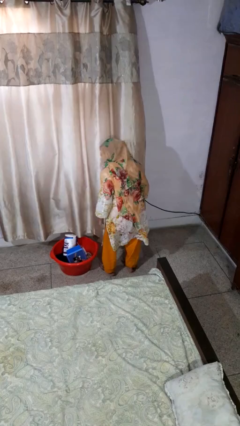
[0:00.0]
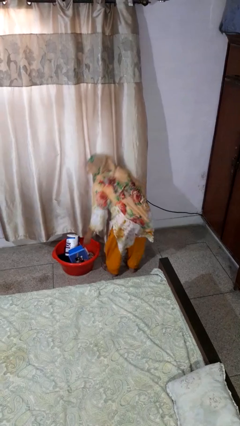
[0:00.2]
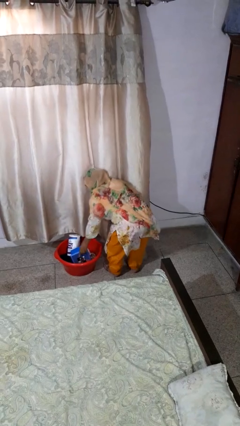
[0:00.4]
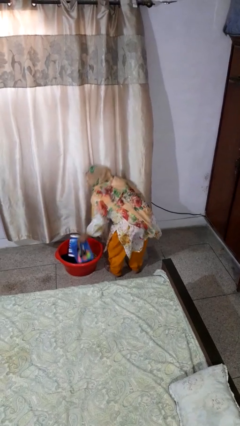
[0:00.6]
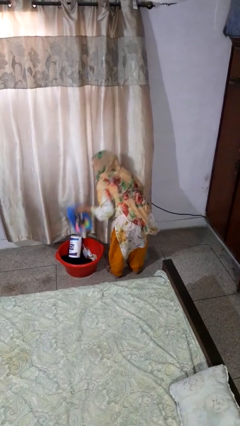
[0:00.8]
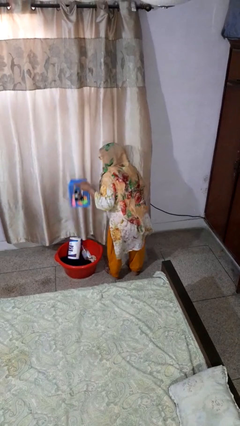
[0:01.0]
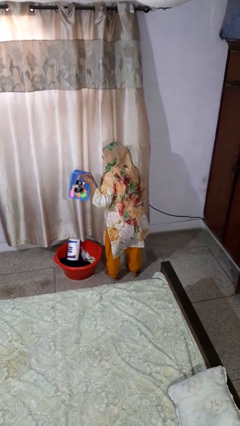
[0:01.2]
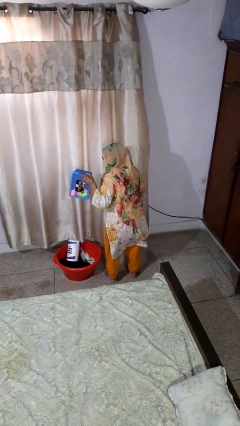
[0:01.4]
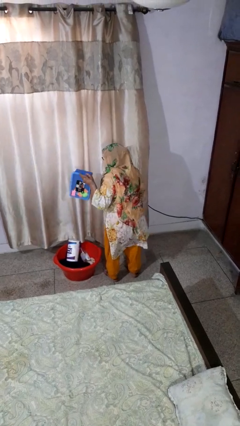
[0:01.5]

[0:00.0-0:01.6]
person takes object from basket

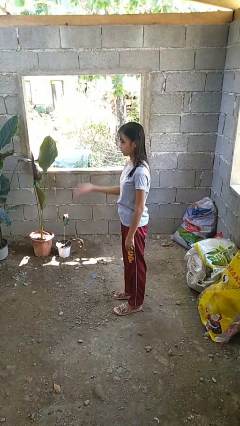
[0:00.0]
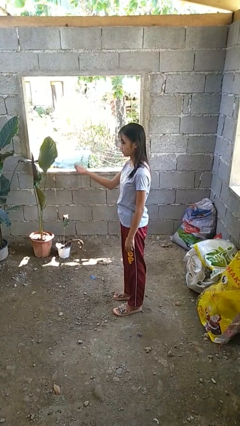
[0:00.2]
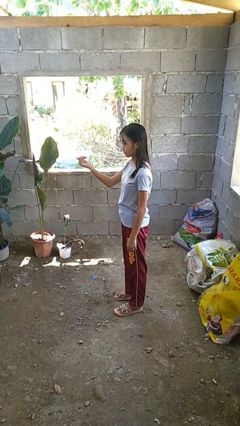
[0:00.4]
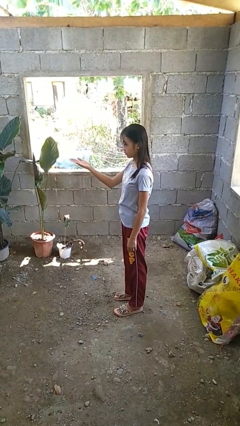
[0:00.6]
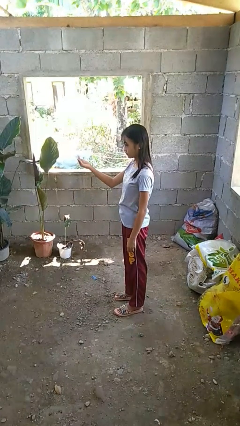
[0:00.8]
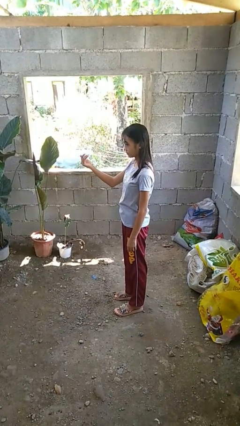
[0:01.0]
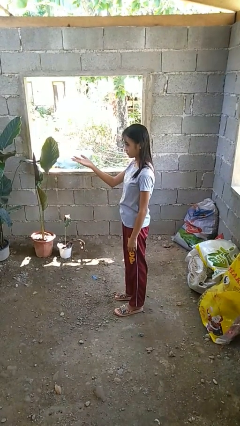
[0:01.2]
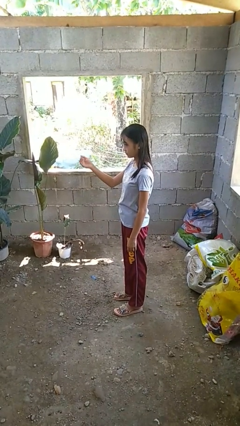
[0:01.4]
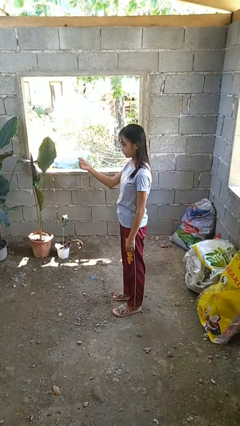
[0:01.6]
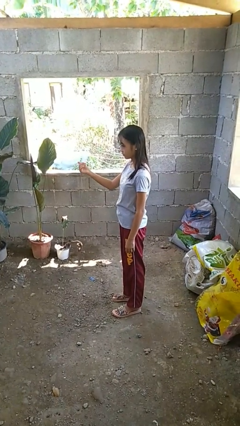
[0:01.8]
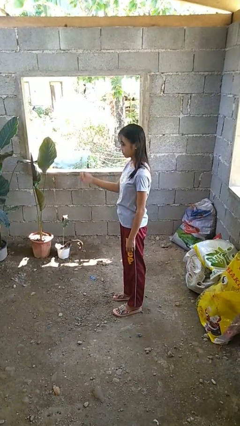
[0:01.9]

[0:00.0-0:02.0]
person gestures come here

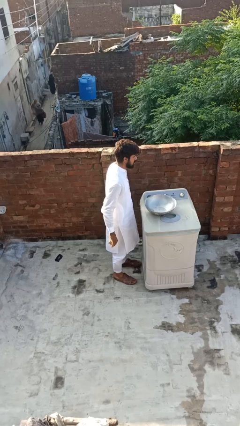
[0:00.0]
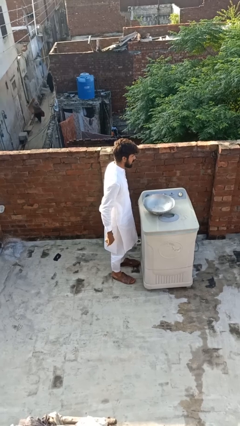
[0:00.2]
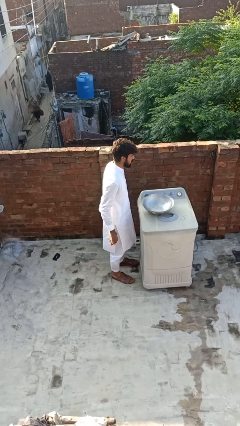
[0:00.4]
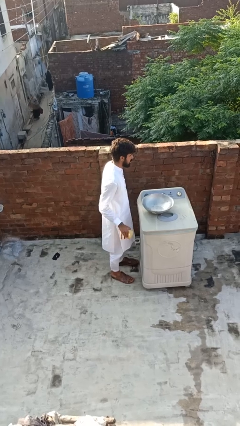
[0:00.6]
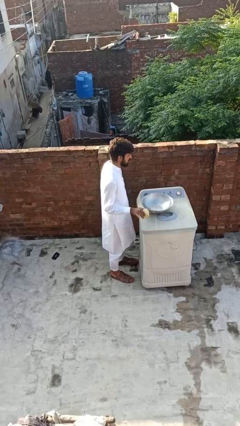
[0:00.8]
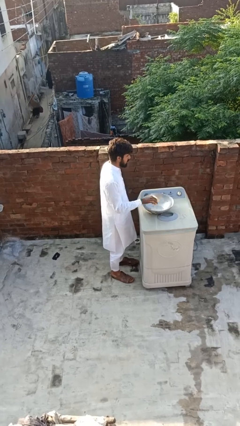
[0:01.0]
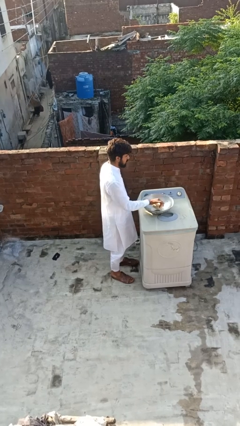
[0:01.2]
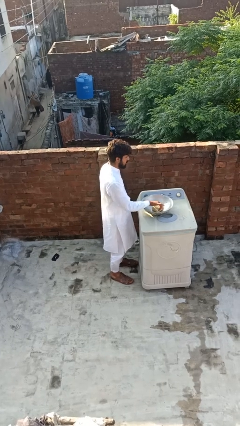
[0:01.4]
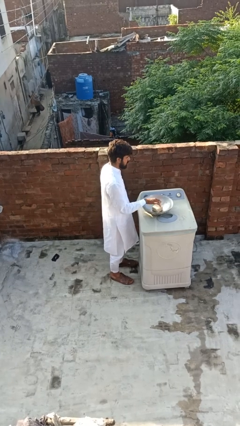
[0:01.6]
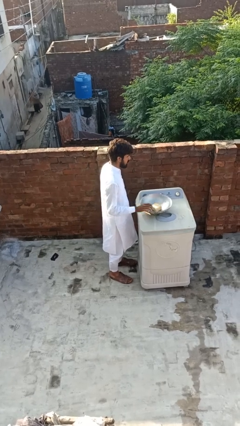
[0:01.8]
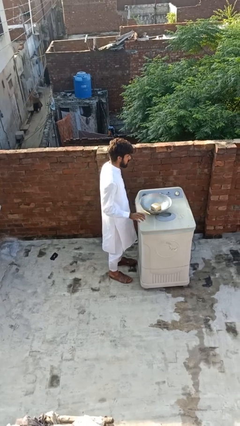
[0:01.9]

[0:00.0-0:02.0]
person pours into bowl

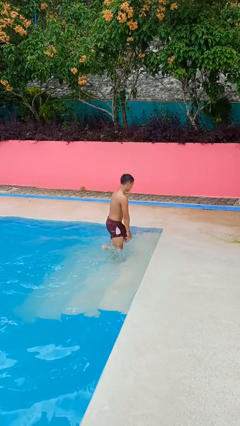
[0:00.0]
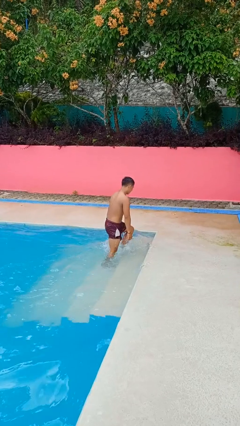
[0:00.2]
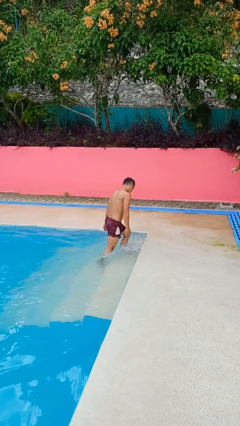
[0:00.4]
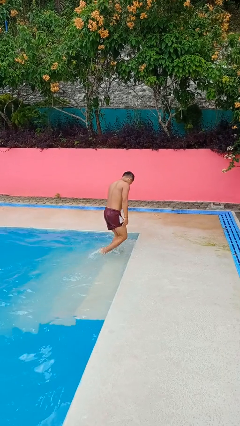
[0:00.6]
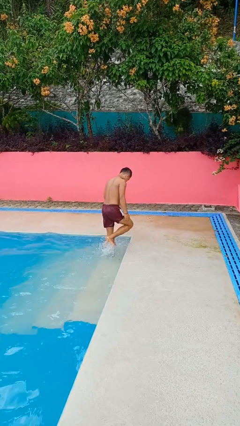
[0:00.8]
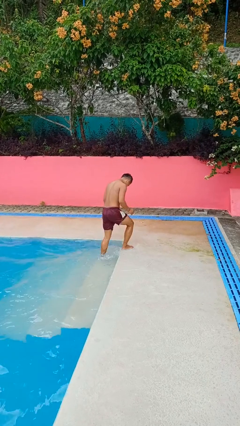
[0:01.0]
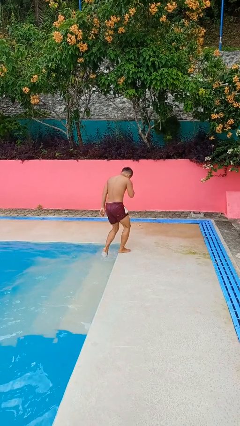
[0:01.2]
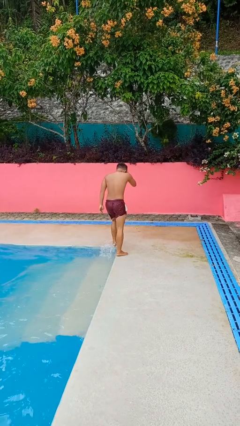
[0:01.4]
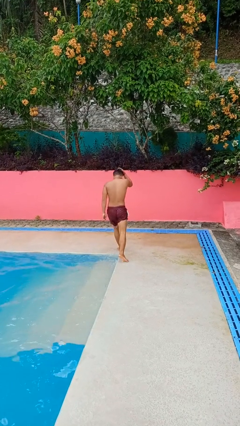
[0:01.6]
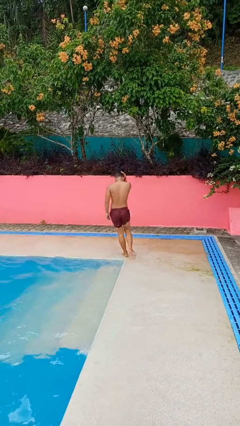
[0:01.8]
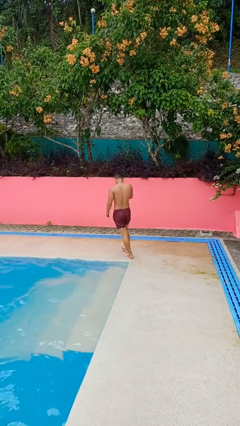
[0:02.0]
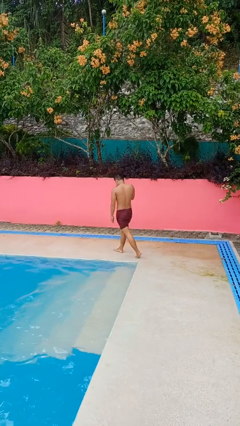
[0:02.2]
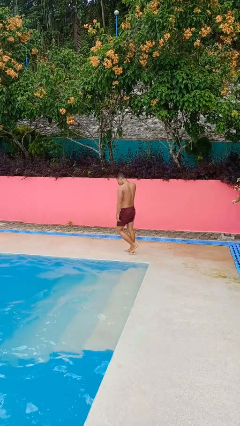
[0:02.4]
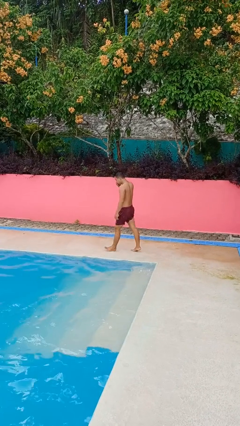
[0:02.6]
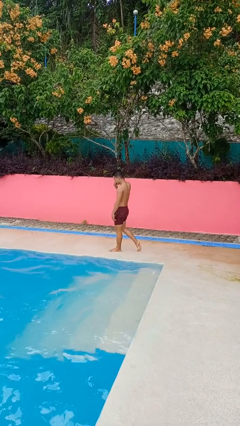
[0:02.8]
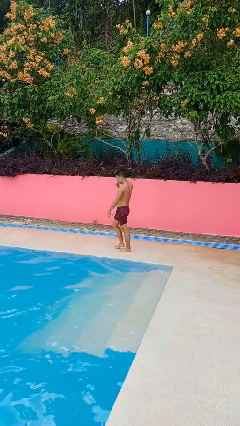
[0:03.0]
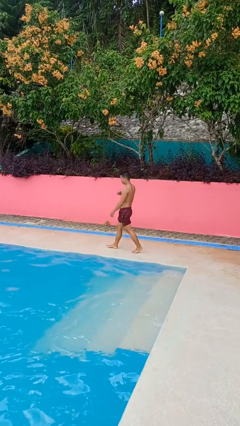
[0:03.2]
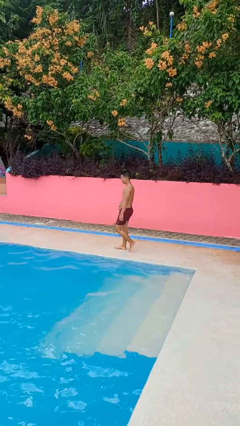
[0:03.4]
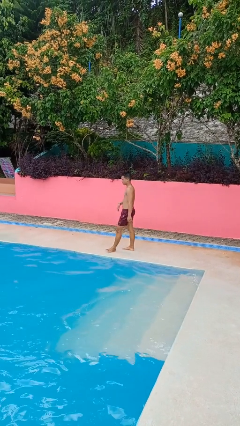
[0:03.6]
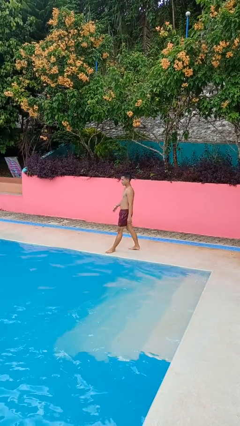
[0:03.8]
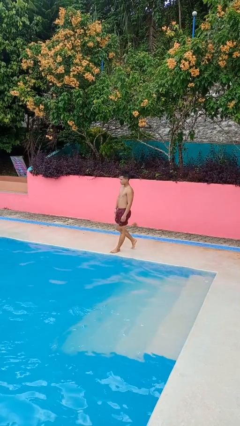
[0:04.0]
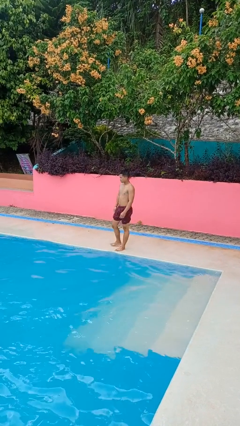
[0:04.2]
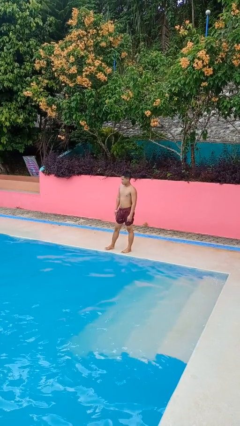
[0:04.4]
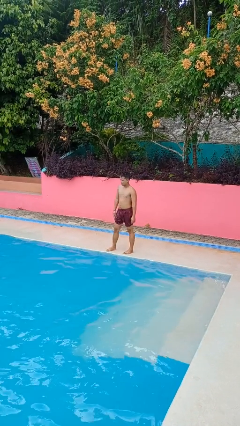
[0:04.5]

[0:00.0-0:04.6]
person exits pool

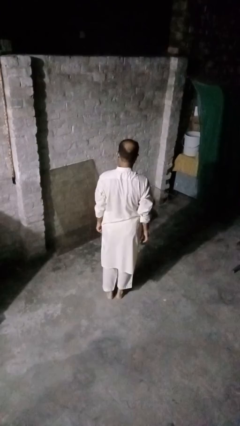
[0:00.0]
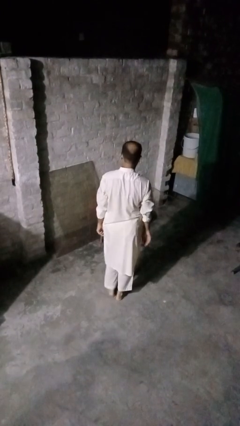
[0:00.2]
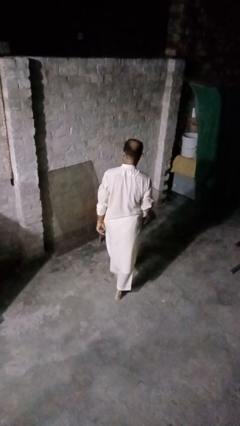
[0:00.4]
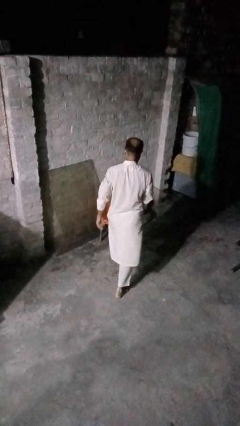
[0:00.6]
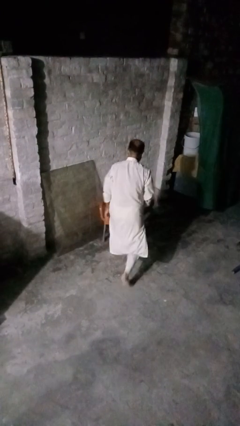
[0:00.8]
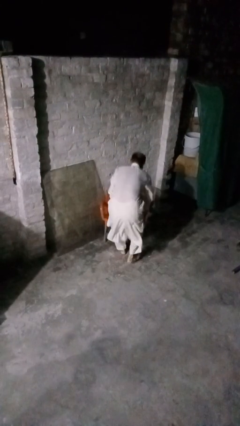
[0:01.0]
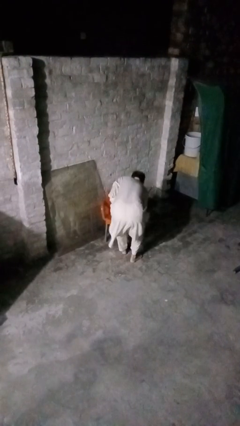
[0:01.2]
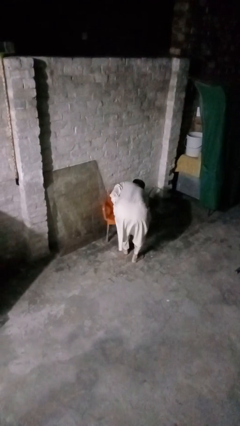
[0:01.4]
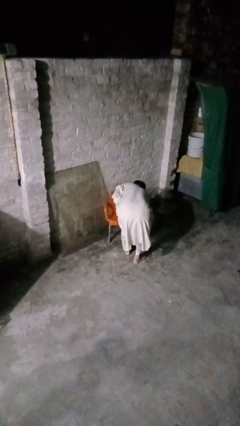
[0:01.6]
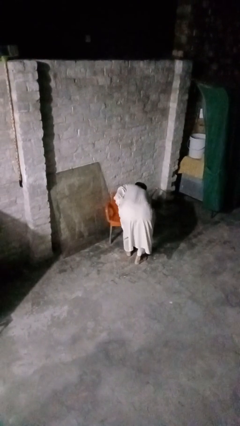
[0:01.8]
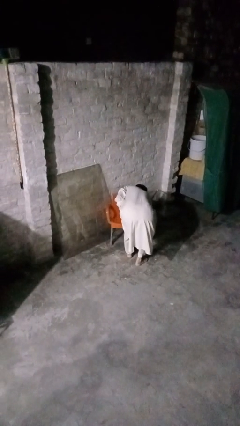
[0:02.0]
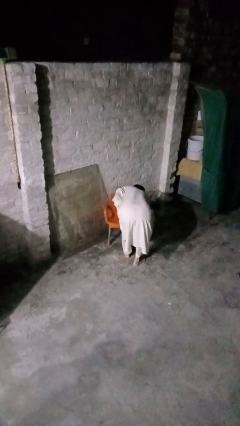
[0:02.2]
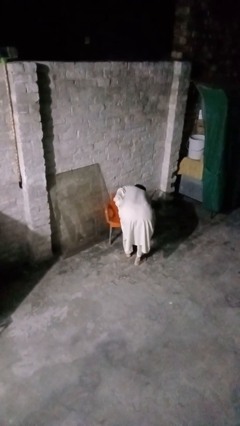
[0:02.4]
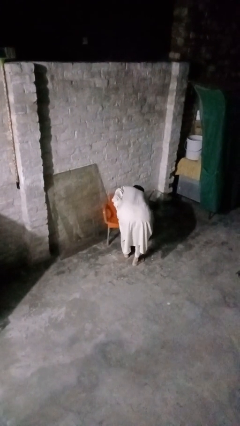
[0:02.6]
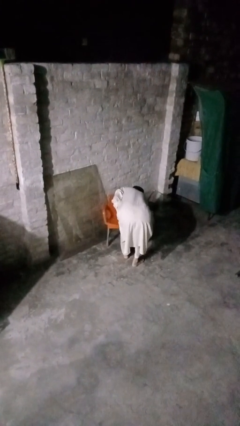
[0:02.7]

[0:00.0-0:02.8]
person stubs toe

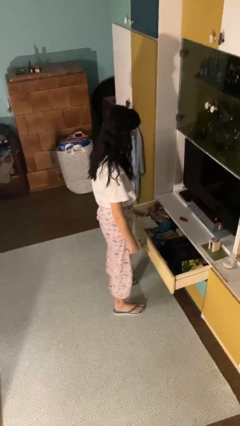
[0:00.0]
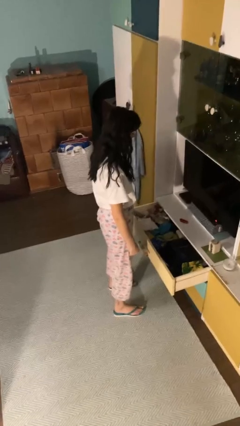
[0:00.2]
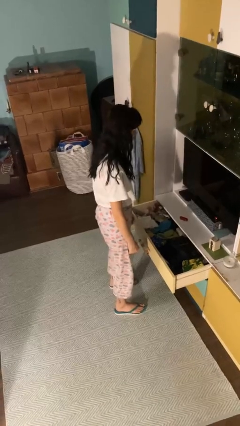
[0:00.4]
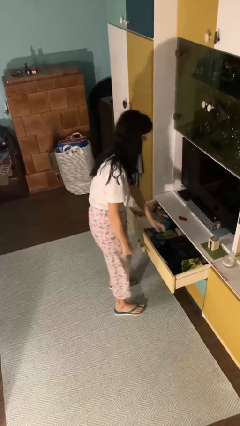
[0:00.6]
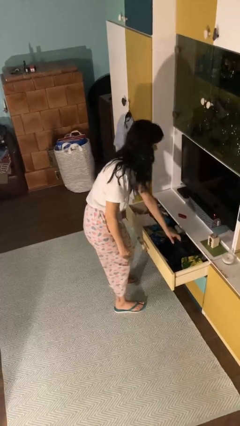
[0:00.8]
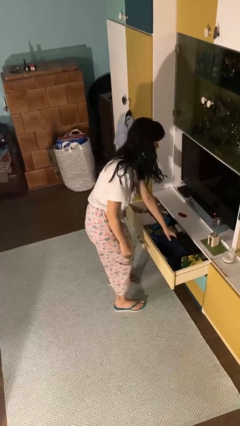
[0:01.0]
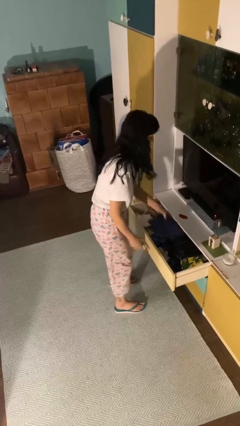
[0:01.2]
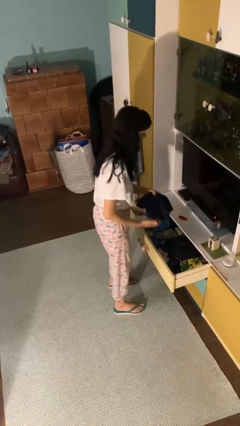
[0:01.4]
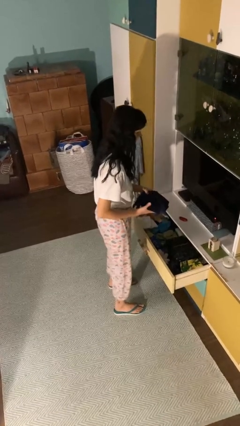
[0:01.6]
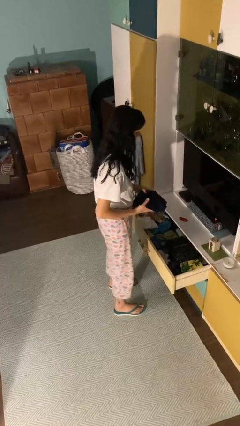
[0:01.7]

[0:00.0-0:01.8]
person takes clothes from dresser

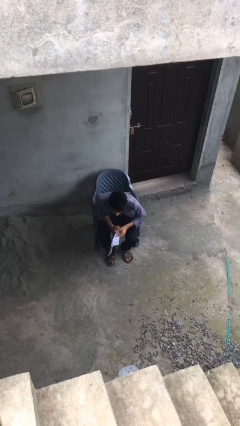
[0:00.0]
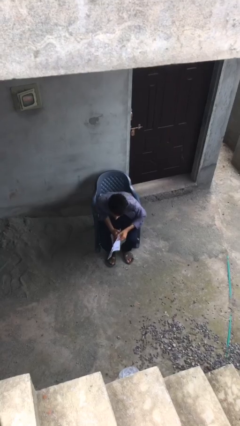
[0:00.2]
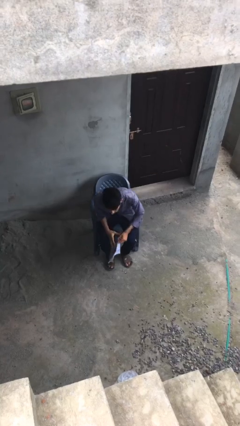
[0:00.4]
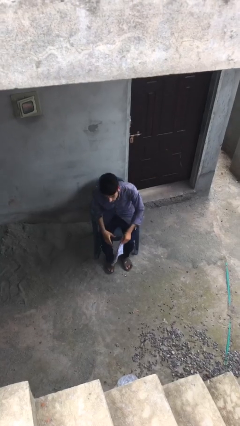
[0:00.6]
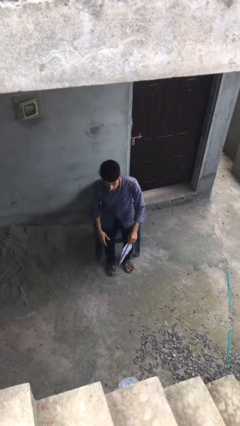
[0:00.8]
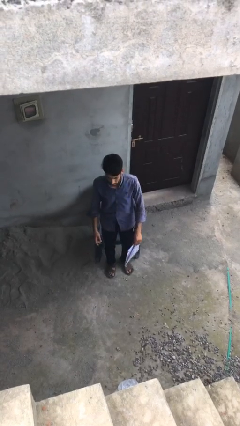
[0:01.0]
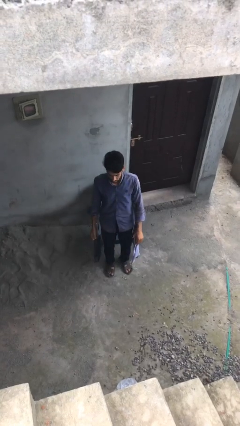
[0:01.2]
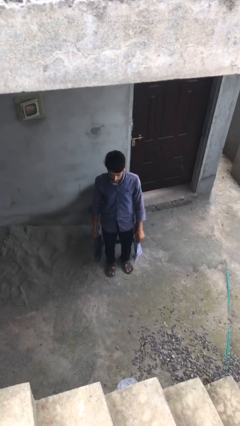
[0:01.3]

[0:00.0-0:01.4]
person stands up

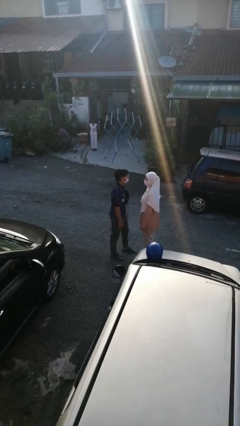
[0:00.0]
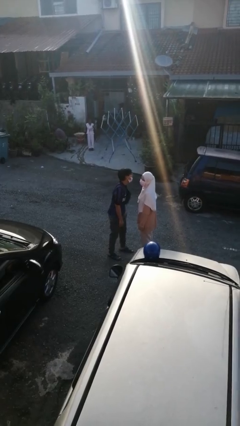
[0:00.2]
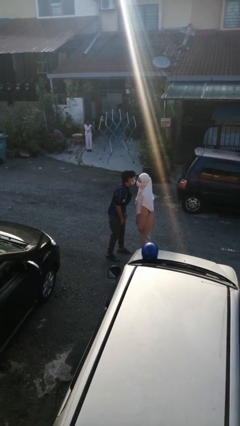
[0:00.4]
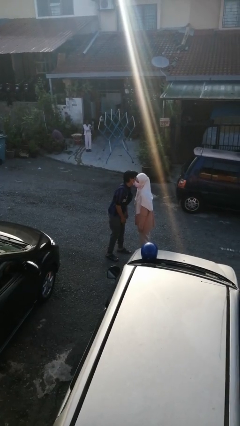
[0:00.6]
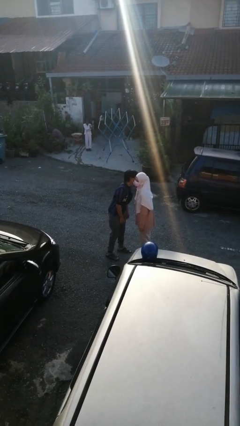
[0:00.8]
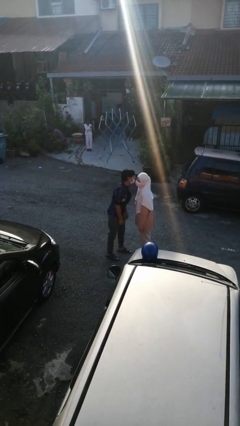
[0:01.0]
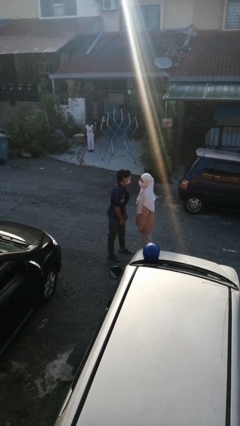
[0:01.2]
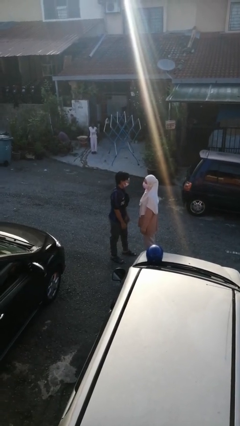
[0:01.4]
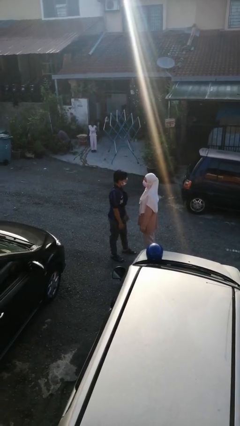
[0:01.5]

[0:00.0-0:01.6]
person kisses cheek of person
